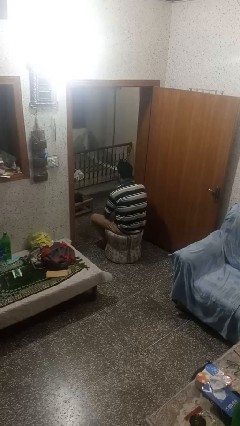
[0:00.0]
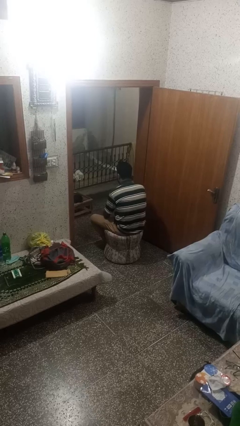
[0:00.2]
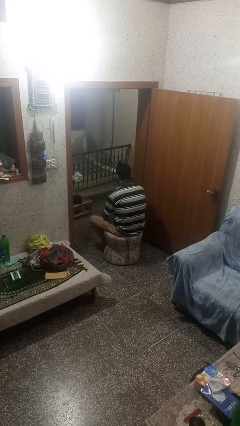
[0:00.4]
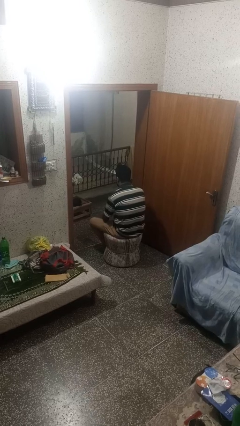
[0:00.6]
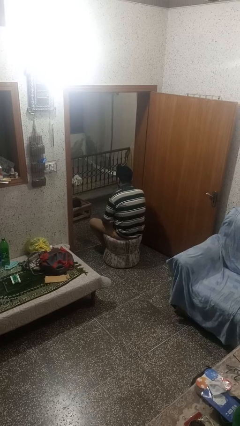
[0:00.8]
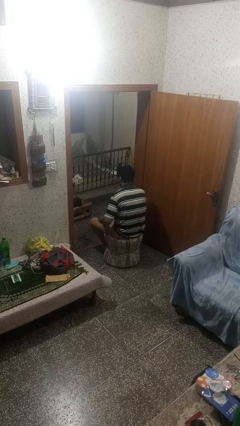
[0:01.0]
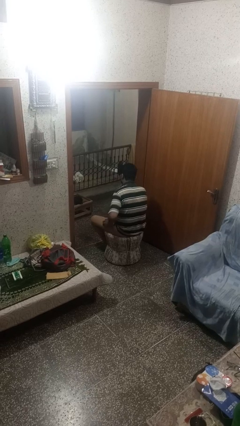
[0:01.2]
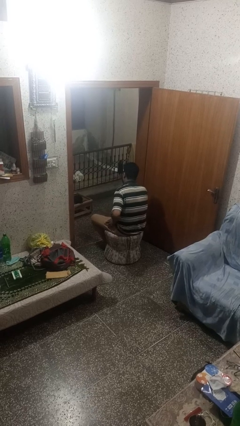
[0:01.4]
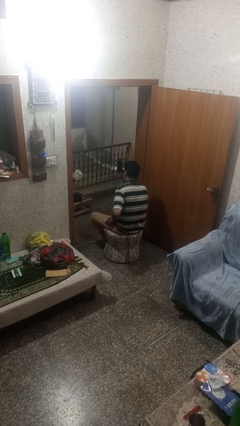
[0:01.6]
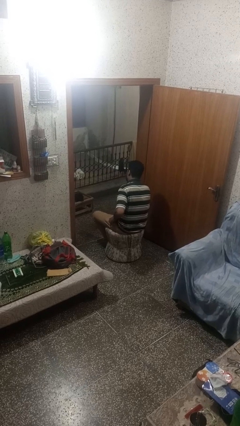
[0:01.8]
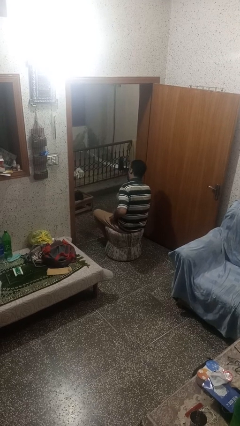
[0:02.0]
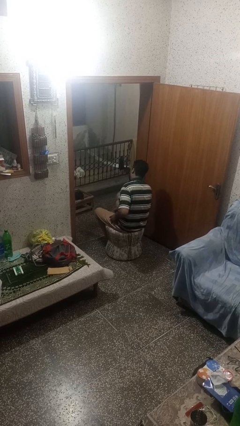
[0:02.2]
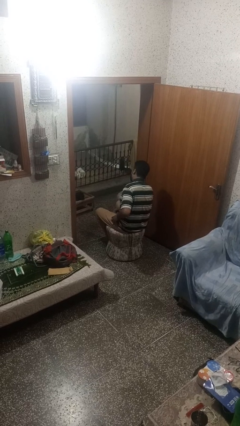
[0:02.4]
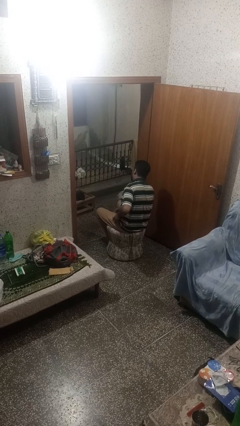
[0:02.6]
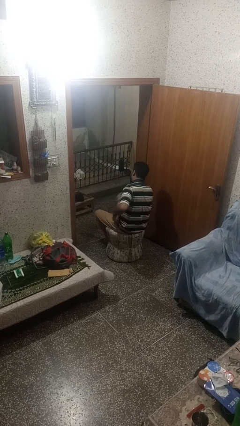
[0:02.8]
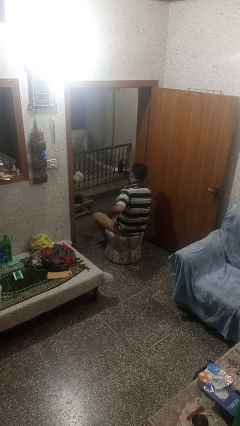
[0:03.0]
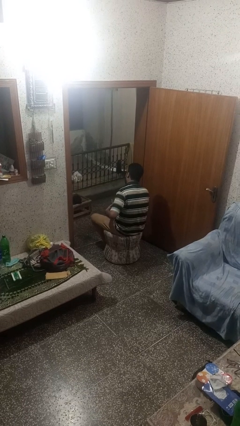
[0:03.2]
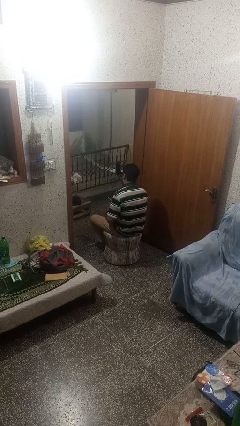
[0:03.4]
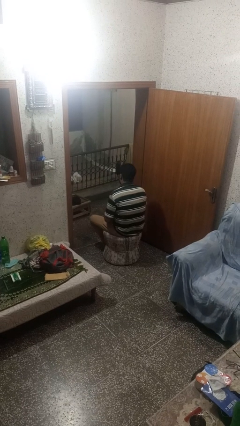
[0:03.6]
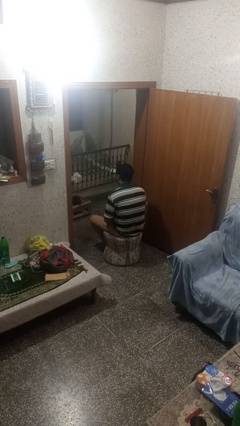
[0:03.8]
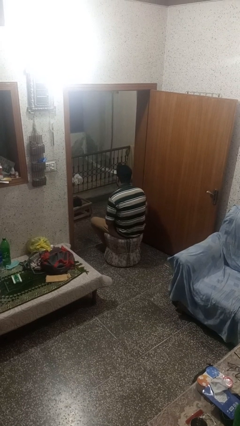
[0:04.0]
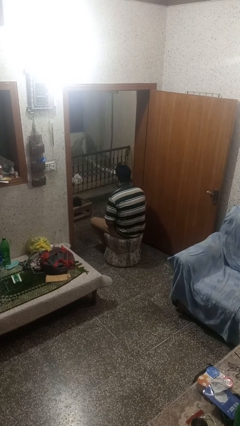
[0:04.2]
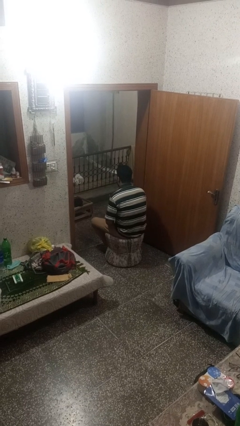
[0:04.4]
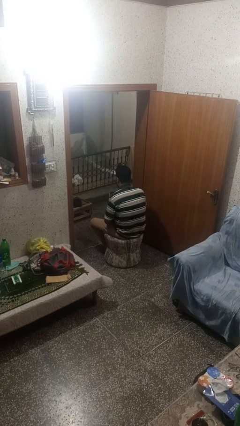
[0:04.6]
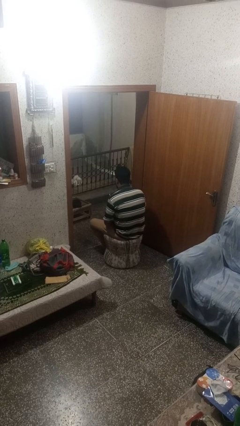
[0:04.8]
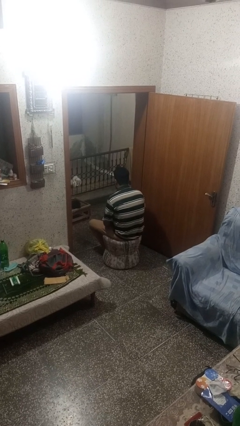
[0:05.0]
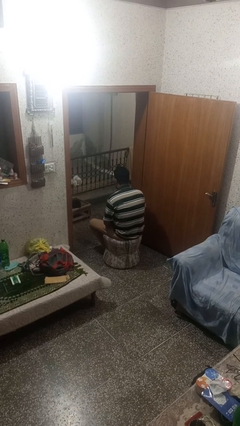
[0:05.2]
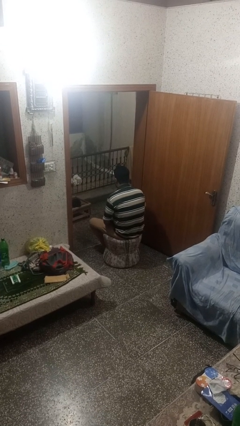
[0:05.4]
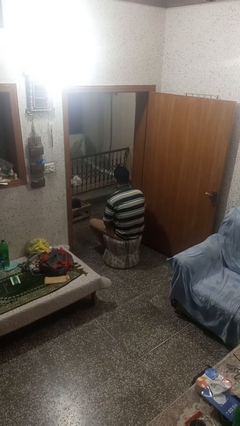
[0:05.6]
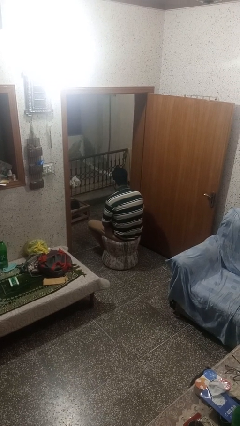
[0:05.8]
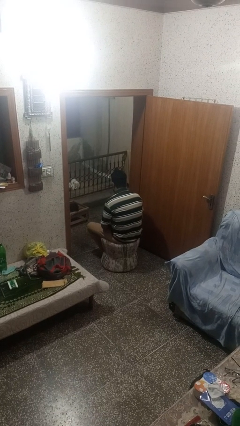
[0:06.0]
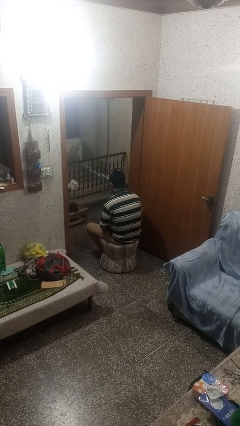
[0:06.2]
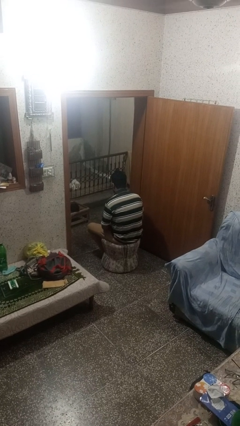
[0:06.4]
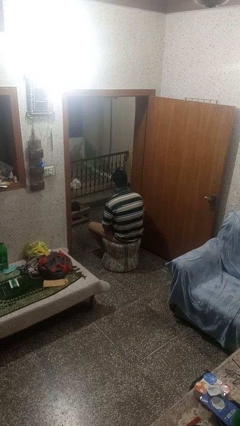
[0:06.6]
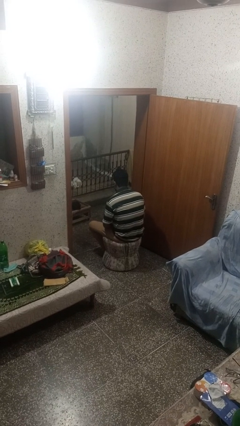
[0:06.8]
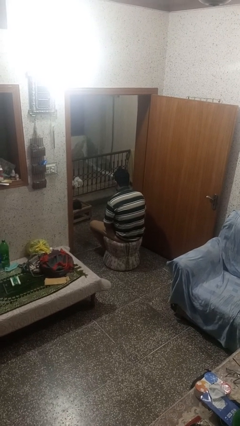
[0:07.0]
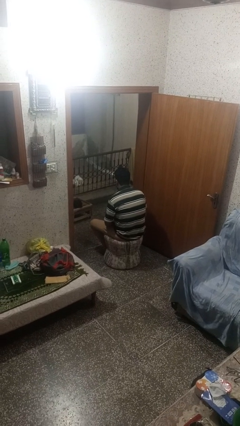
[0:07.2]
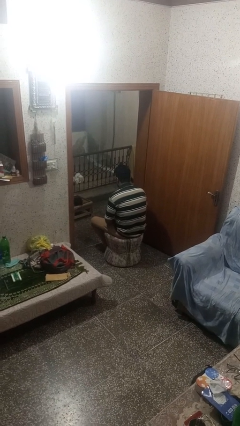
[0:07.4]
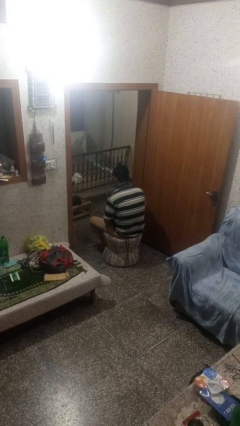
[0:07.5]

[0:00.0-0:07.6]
person takes phone from pocket

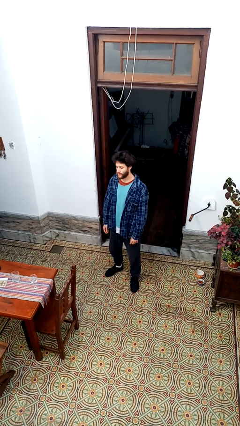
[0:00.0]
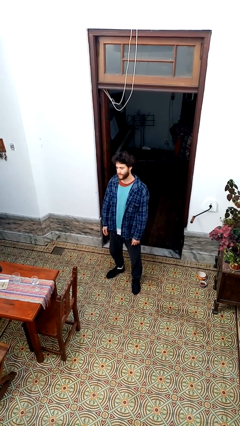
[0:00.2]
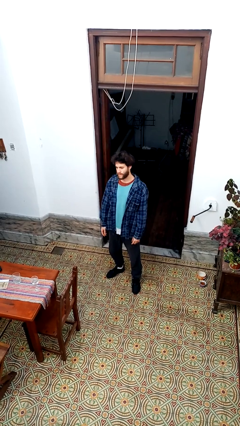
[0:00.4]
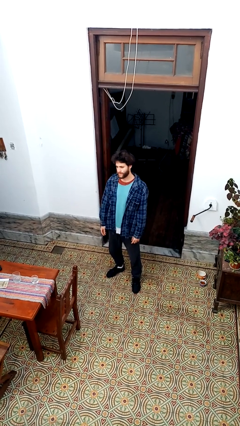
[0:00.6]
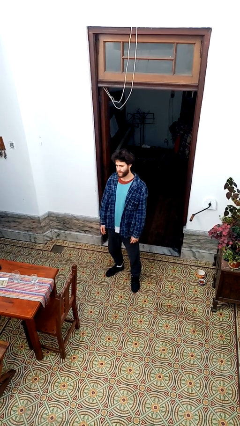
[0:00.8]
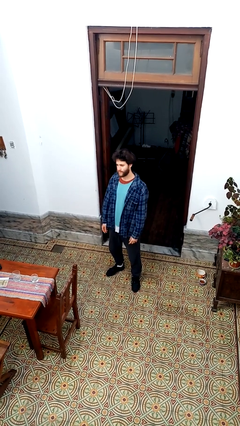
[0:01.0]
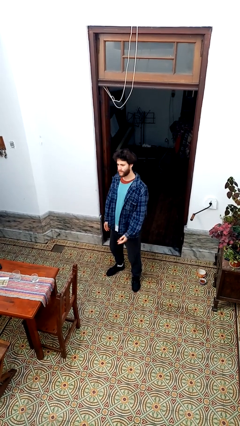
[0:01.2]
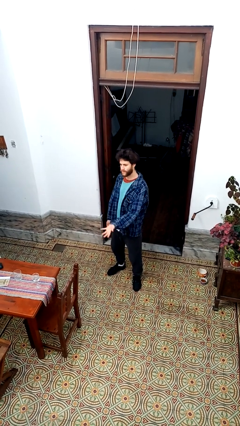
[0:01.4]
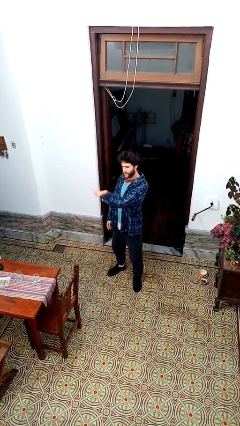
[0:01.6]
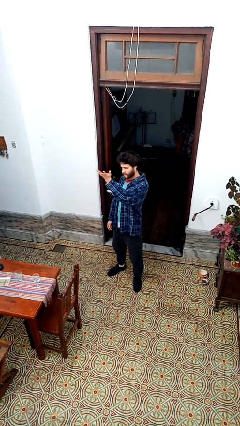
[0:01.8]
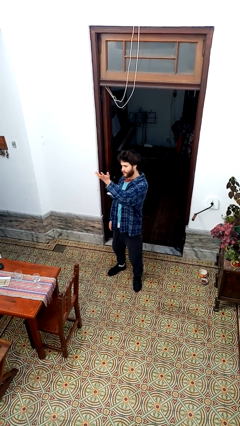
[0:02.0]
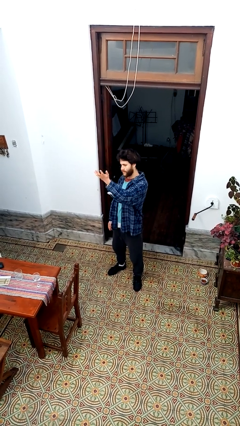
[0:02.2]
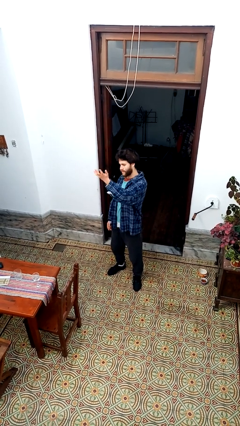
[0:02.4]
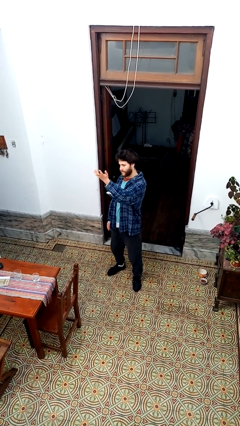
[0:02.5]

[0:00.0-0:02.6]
person gestures swipe up

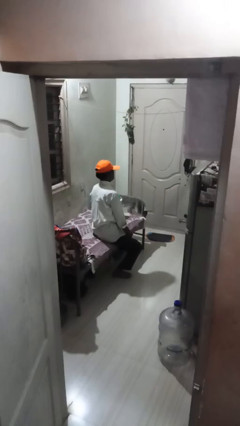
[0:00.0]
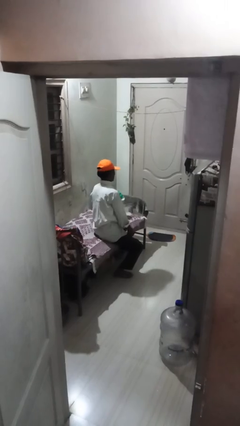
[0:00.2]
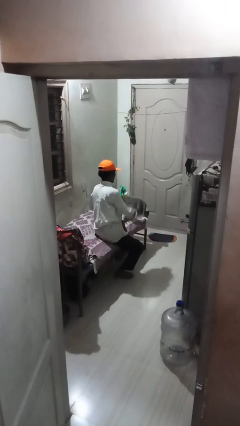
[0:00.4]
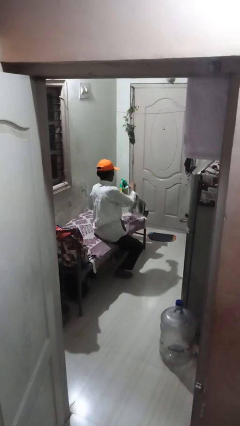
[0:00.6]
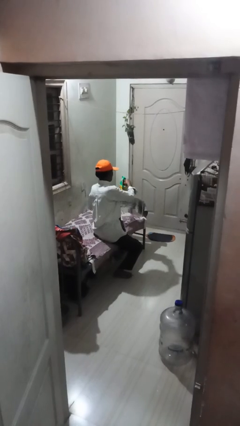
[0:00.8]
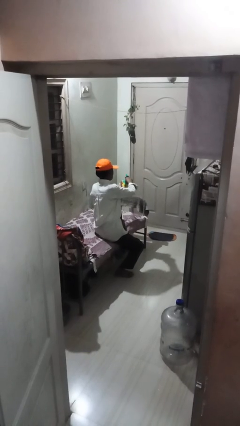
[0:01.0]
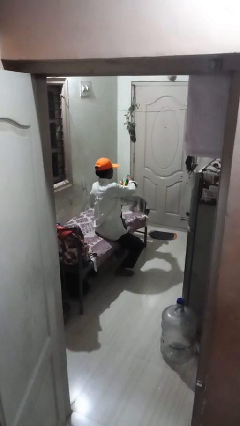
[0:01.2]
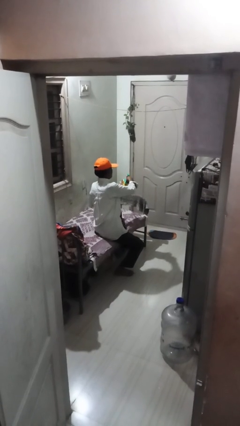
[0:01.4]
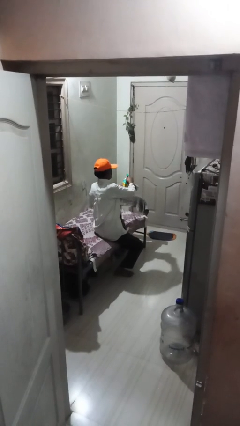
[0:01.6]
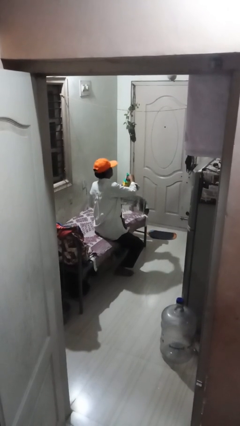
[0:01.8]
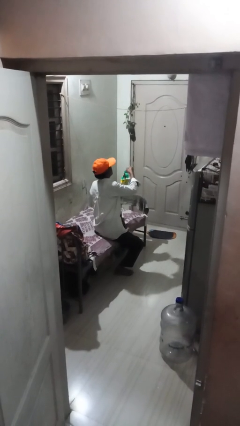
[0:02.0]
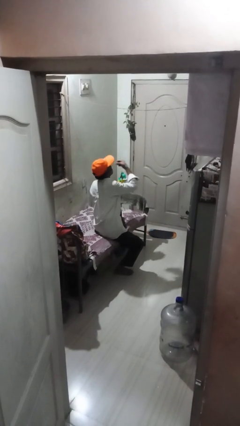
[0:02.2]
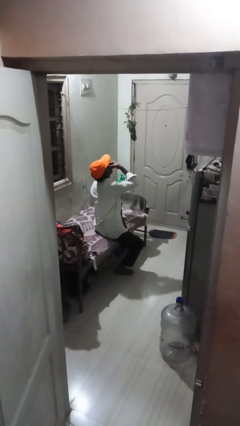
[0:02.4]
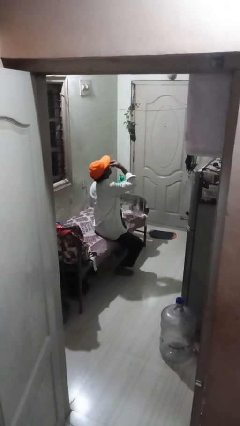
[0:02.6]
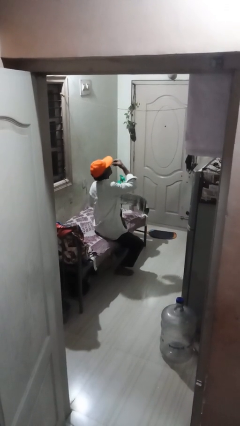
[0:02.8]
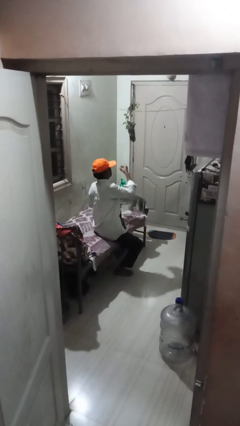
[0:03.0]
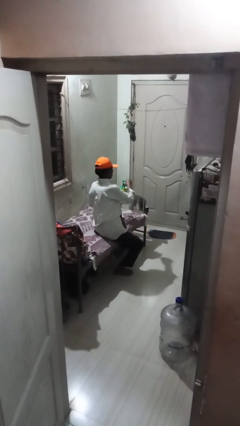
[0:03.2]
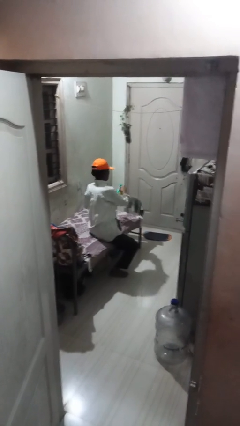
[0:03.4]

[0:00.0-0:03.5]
person eats snack from bag

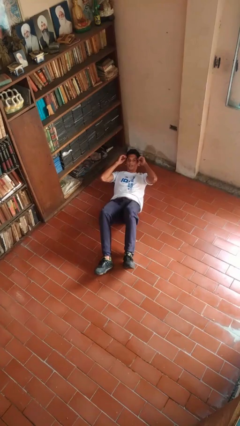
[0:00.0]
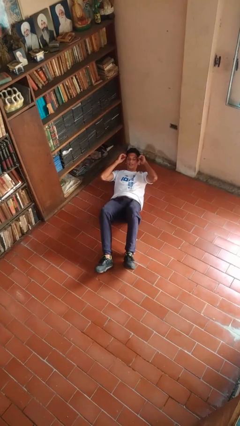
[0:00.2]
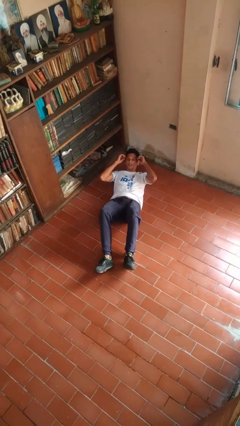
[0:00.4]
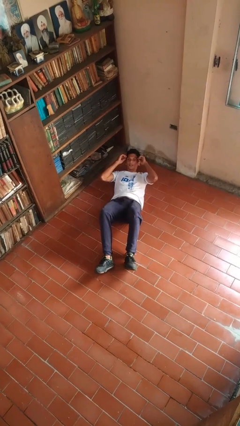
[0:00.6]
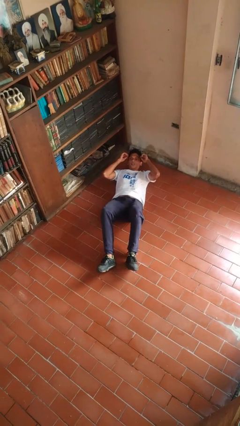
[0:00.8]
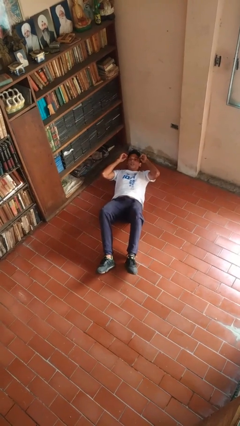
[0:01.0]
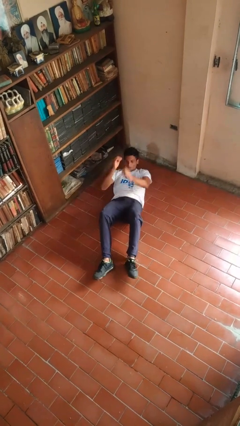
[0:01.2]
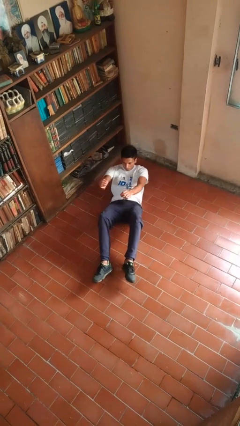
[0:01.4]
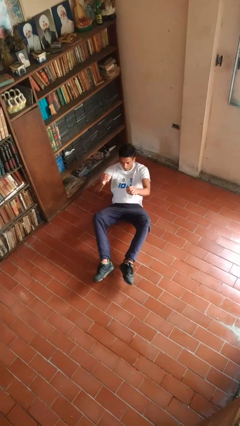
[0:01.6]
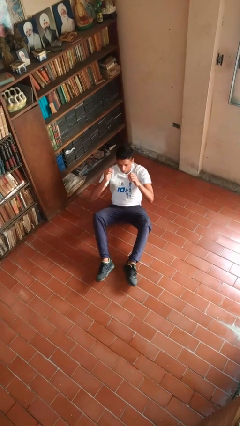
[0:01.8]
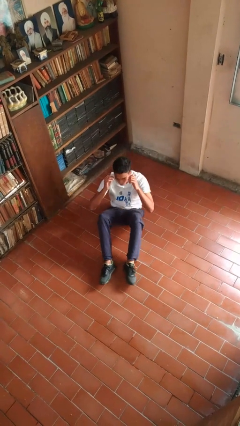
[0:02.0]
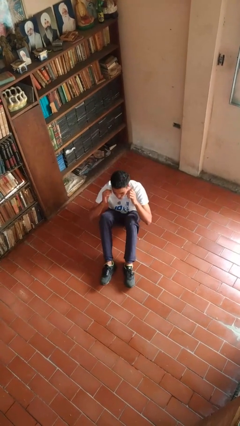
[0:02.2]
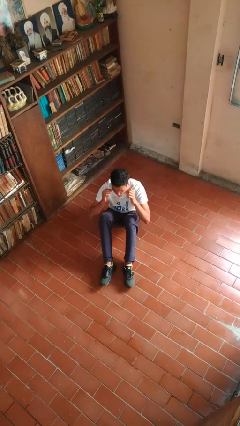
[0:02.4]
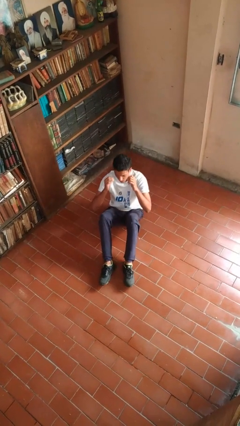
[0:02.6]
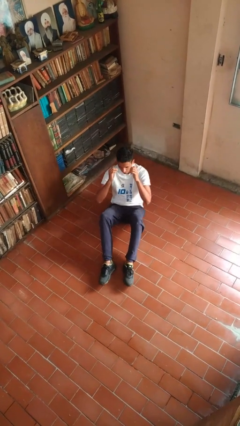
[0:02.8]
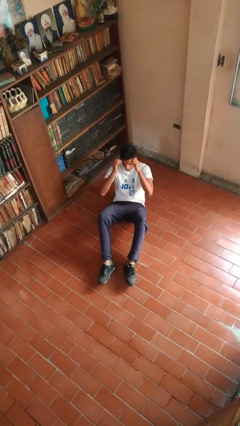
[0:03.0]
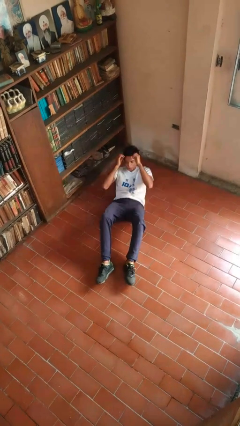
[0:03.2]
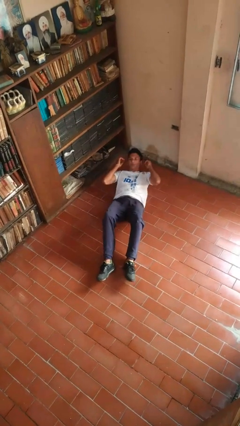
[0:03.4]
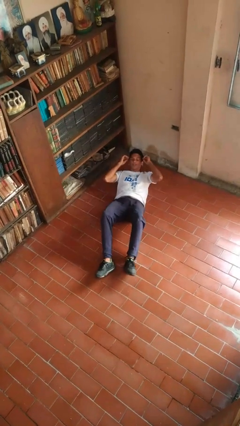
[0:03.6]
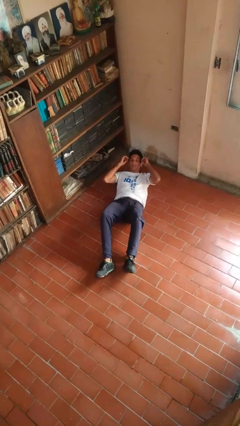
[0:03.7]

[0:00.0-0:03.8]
person exercises with situp

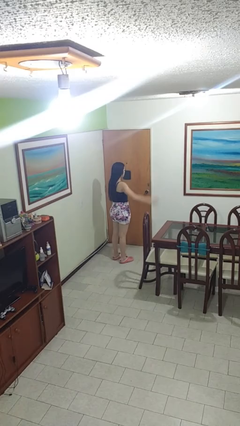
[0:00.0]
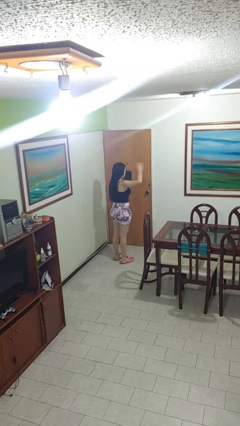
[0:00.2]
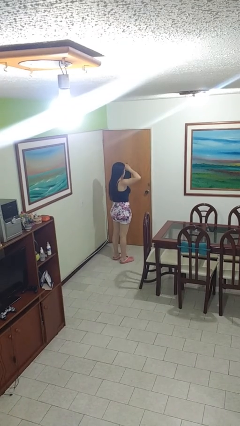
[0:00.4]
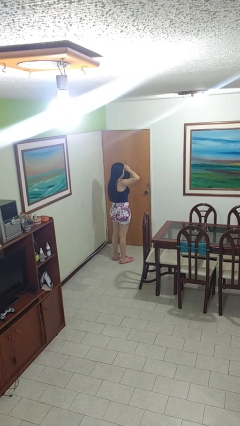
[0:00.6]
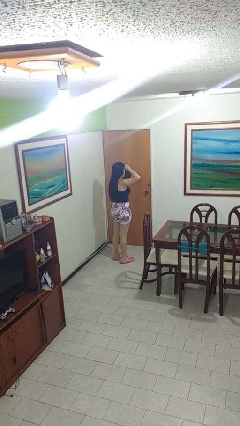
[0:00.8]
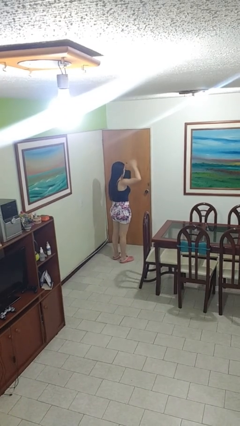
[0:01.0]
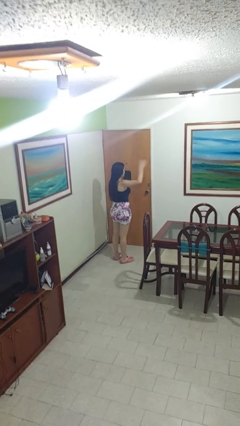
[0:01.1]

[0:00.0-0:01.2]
person salutes
